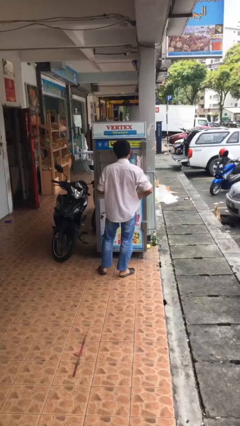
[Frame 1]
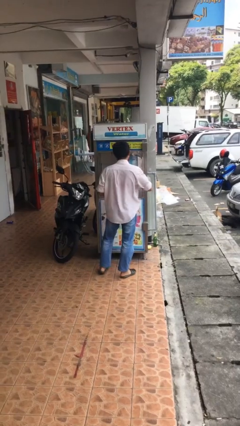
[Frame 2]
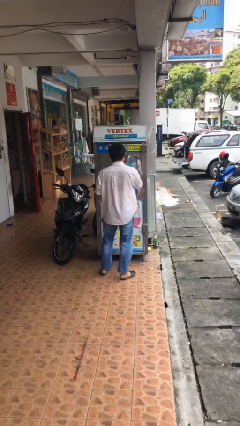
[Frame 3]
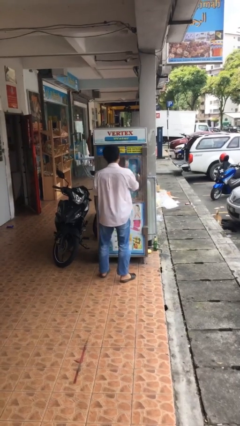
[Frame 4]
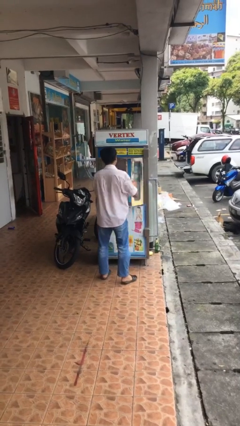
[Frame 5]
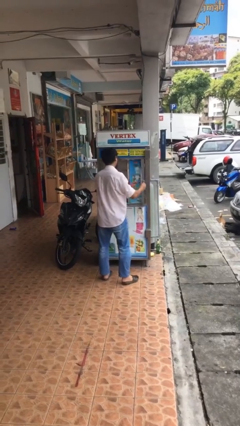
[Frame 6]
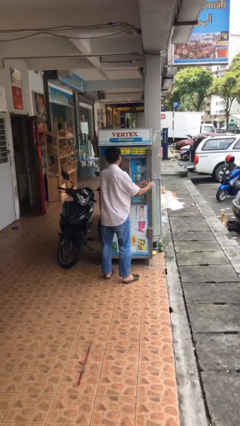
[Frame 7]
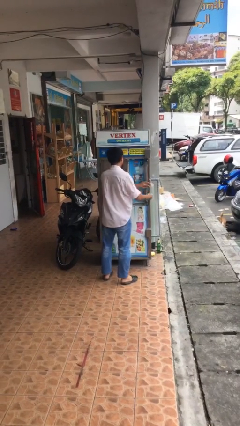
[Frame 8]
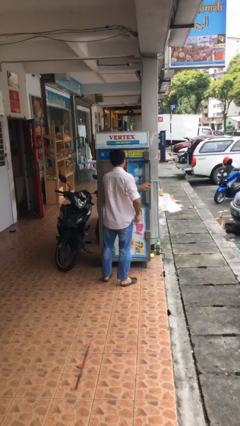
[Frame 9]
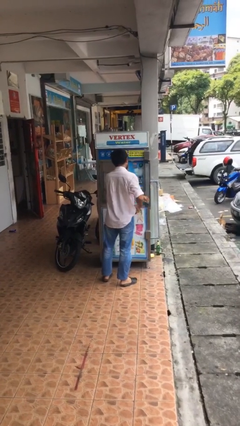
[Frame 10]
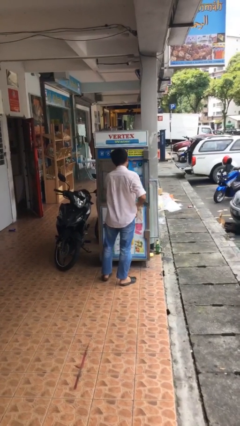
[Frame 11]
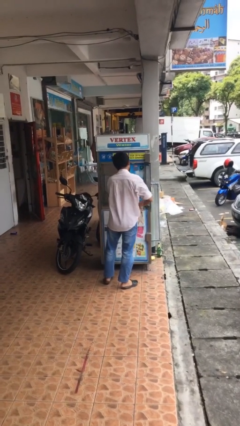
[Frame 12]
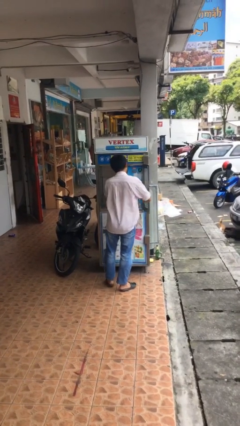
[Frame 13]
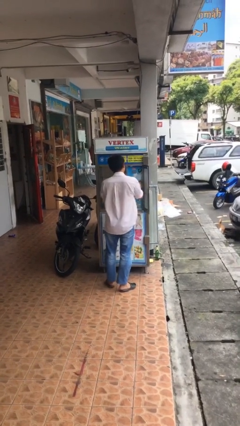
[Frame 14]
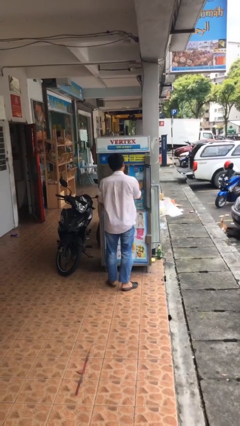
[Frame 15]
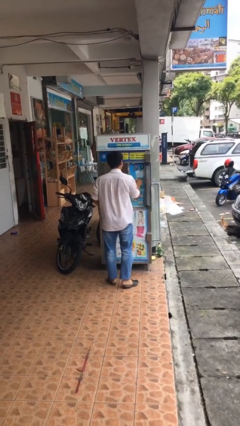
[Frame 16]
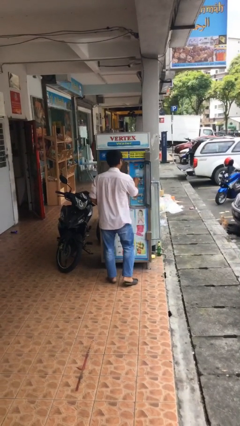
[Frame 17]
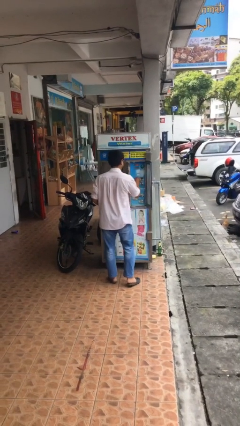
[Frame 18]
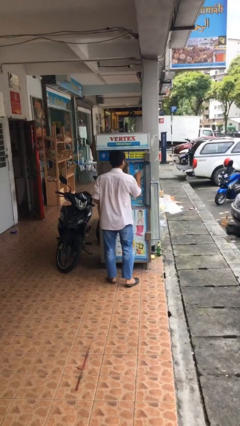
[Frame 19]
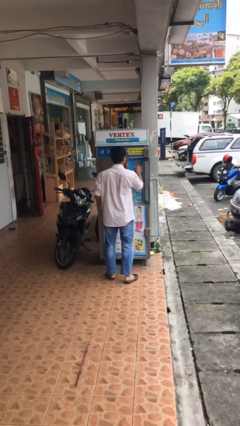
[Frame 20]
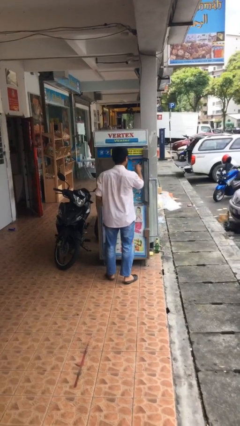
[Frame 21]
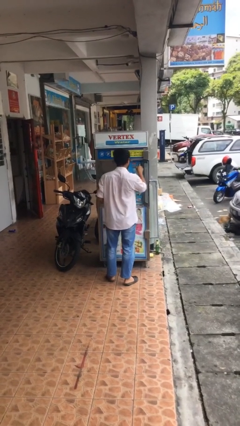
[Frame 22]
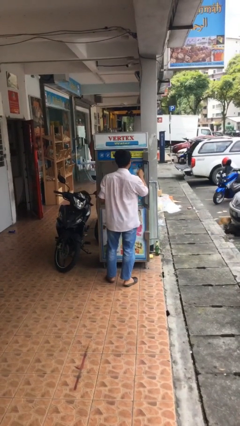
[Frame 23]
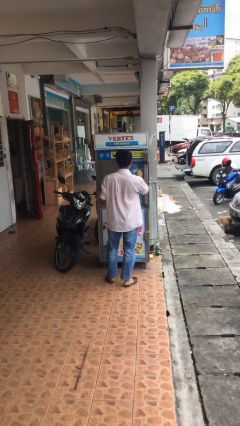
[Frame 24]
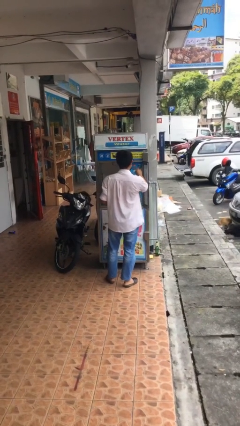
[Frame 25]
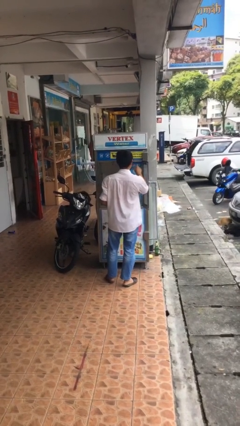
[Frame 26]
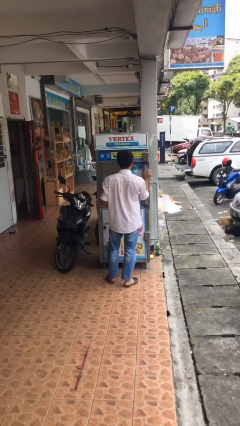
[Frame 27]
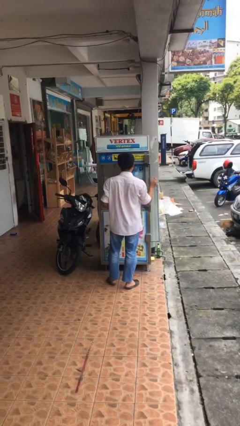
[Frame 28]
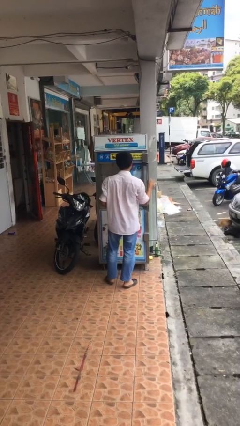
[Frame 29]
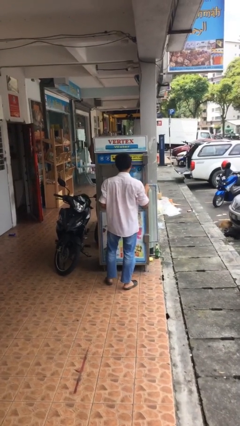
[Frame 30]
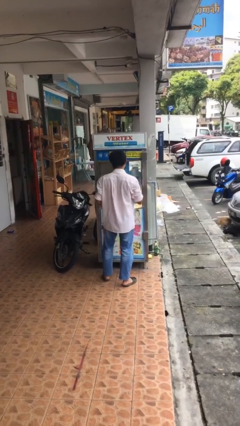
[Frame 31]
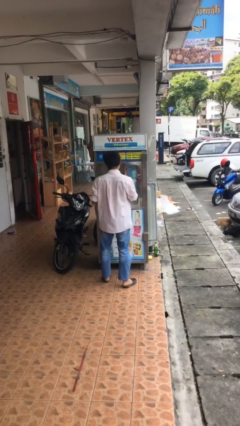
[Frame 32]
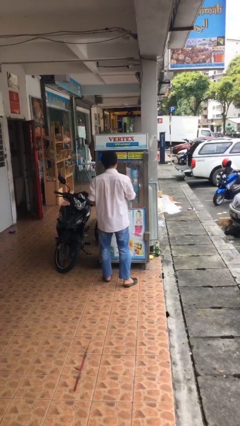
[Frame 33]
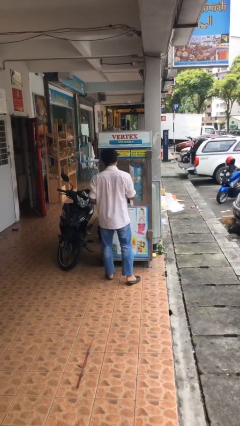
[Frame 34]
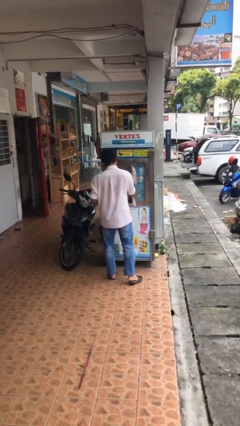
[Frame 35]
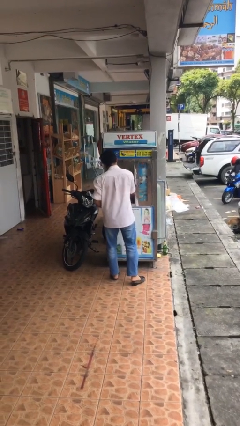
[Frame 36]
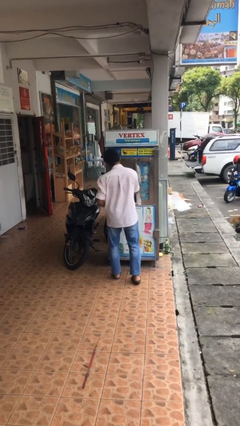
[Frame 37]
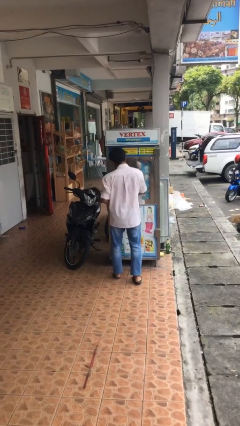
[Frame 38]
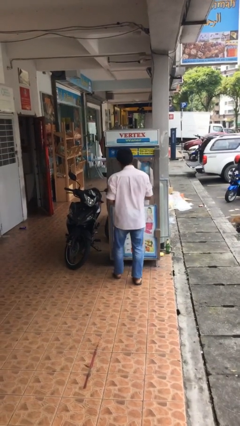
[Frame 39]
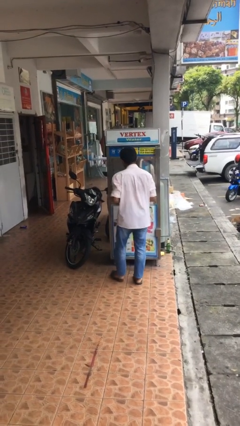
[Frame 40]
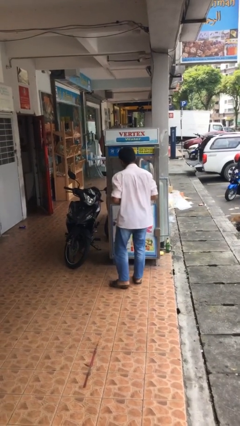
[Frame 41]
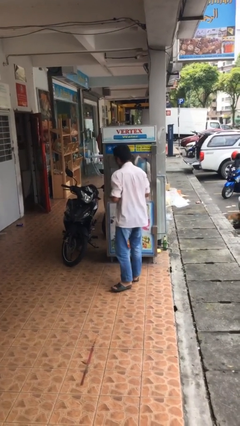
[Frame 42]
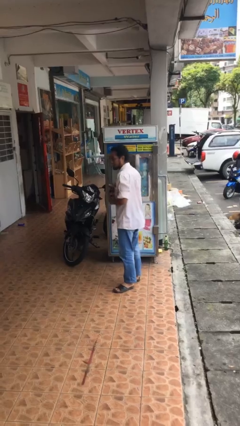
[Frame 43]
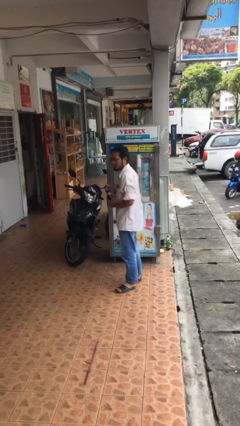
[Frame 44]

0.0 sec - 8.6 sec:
person purchases from machine

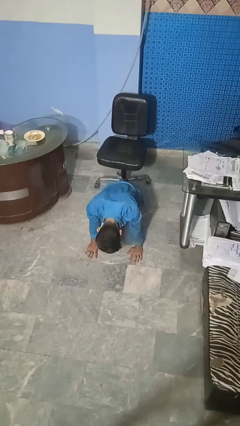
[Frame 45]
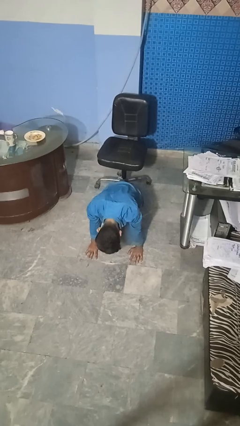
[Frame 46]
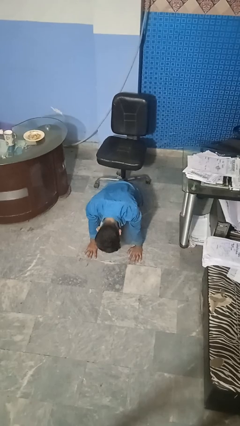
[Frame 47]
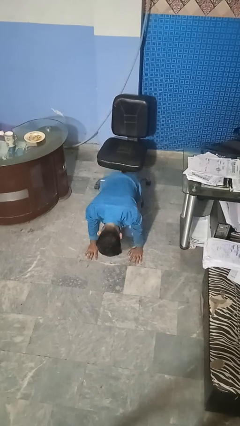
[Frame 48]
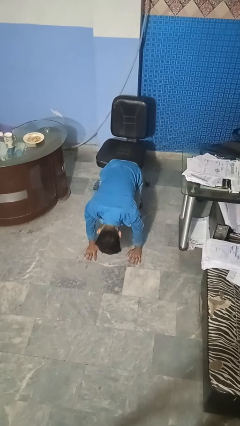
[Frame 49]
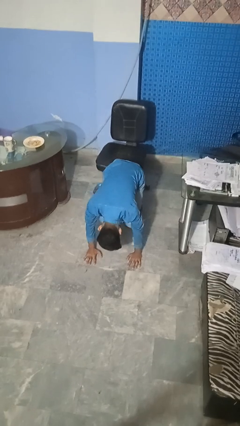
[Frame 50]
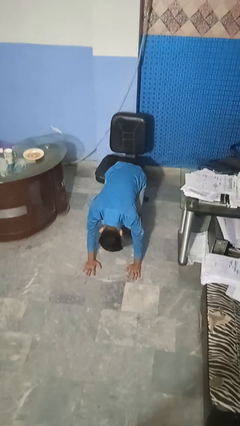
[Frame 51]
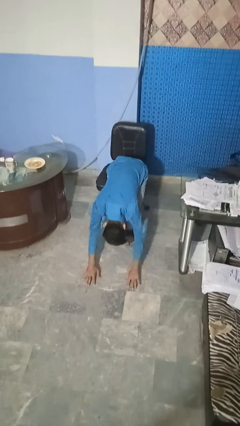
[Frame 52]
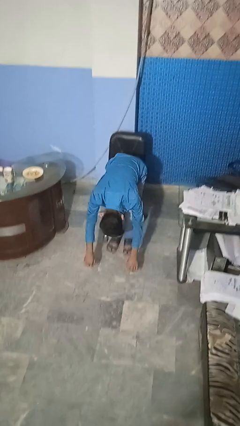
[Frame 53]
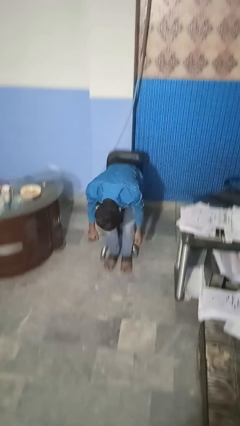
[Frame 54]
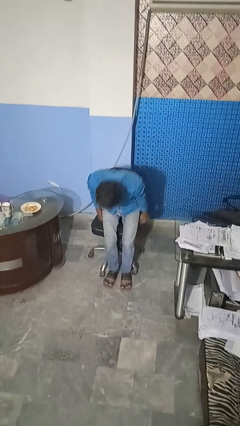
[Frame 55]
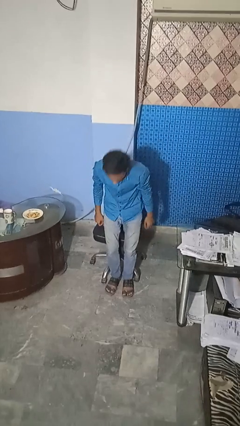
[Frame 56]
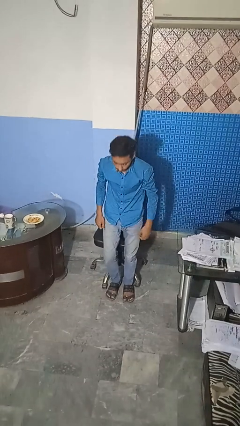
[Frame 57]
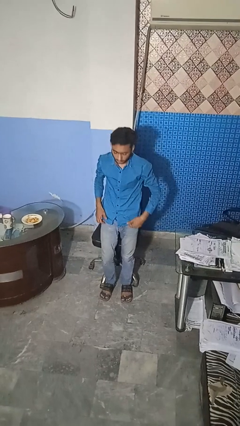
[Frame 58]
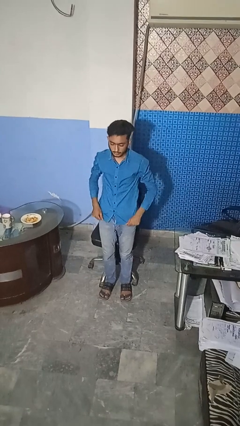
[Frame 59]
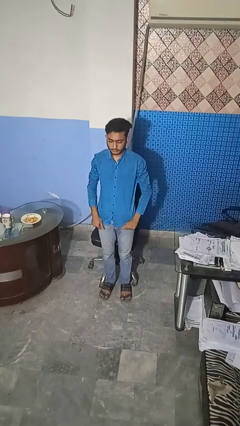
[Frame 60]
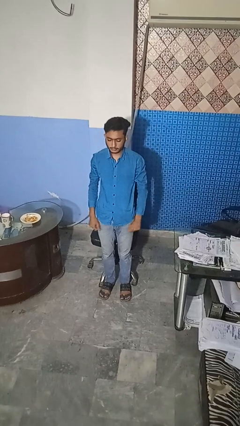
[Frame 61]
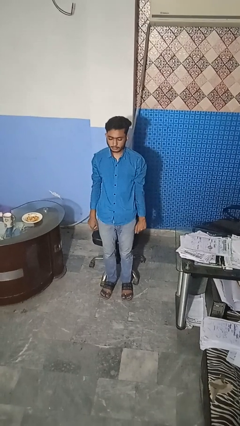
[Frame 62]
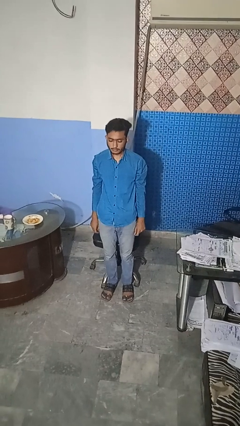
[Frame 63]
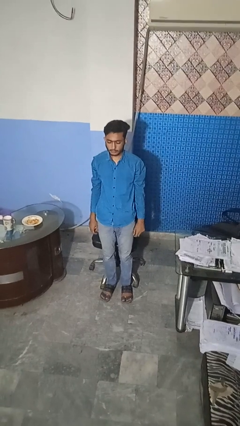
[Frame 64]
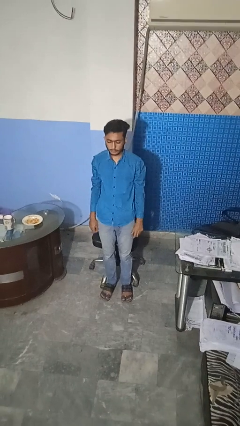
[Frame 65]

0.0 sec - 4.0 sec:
person stands up from floor

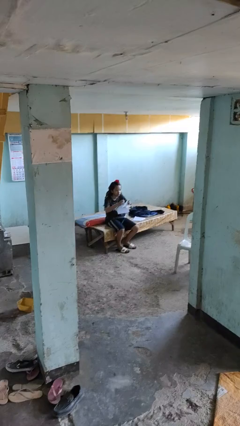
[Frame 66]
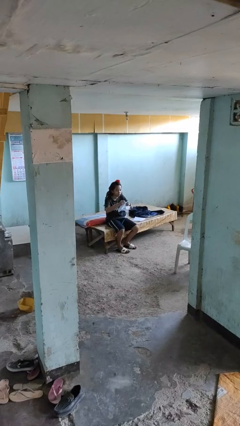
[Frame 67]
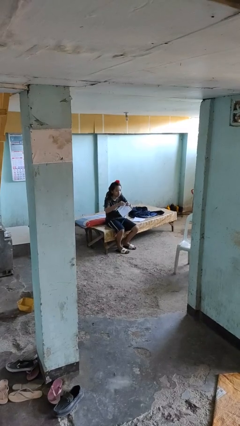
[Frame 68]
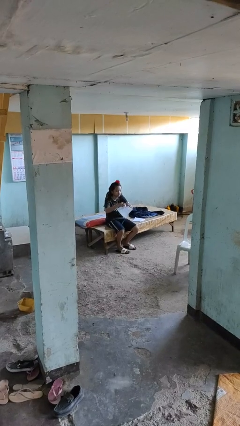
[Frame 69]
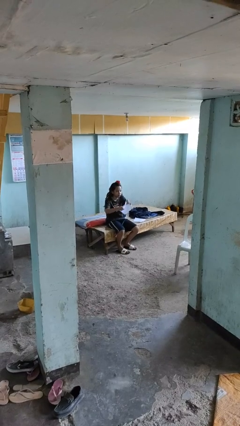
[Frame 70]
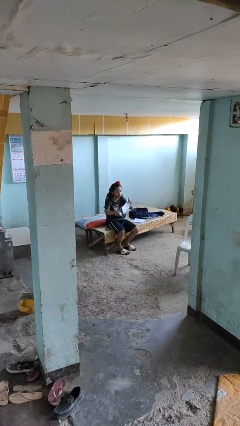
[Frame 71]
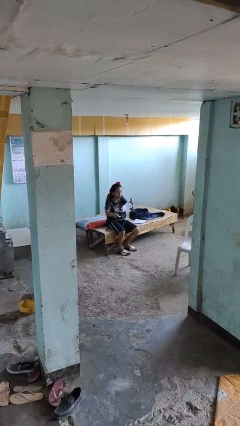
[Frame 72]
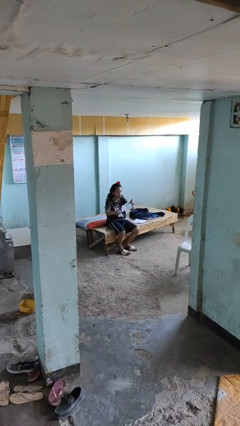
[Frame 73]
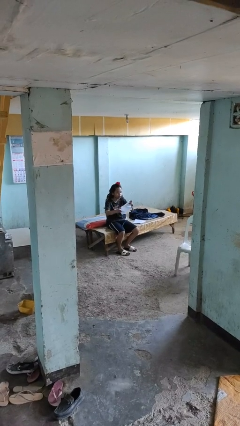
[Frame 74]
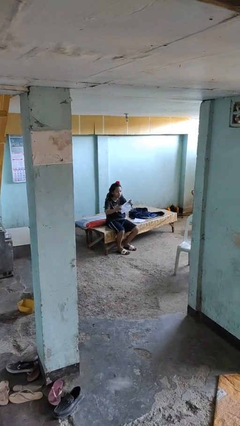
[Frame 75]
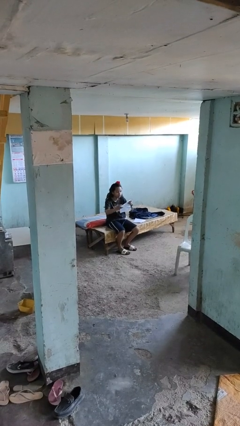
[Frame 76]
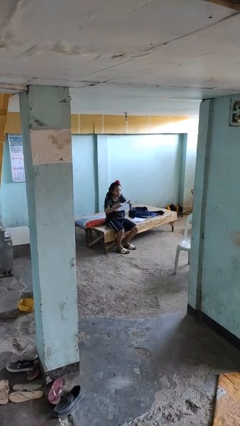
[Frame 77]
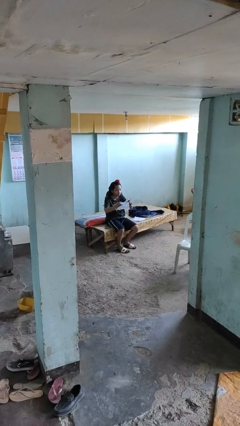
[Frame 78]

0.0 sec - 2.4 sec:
person tears paper

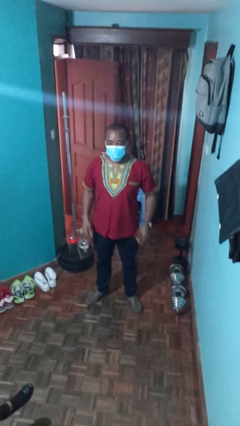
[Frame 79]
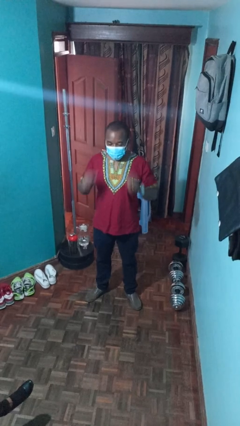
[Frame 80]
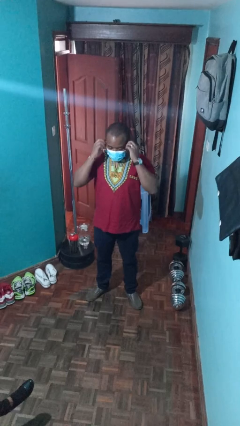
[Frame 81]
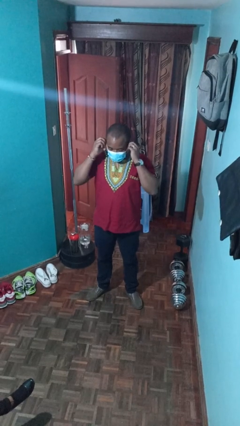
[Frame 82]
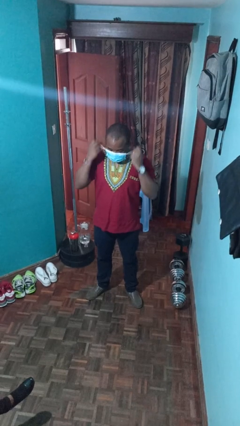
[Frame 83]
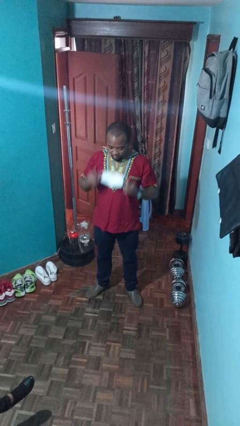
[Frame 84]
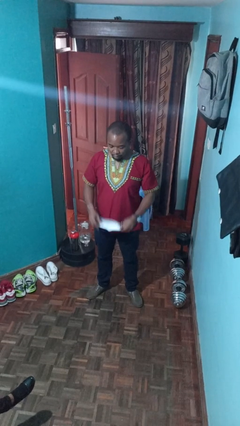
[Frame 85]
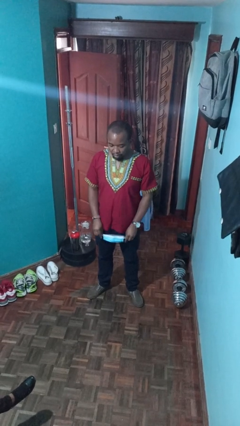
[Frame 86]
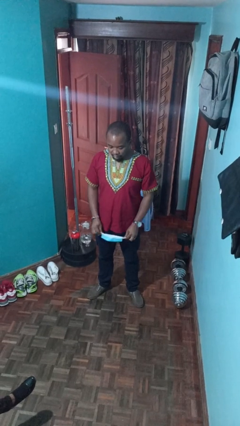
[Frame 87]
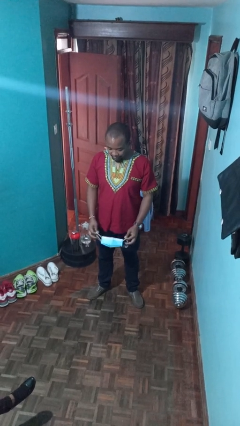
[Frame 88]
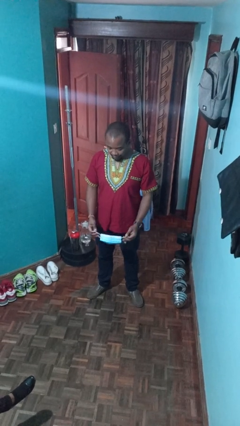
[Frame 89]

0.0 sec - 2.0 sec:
person takes off facemask

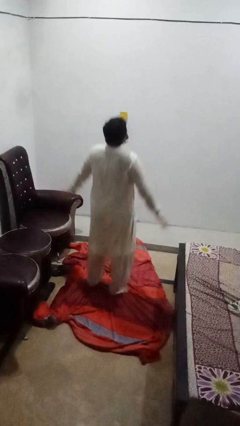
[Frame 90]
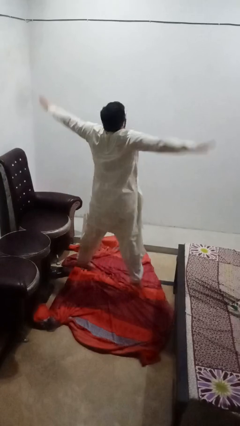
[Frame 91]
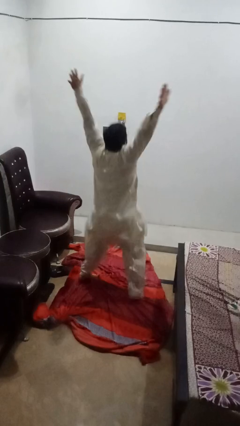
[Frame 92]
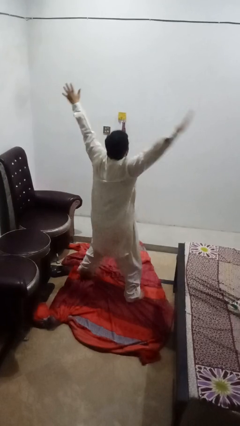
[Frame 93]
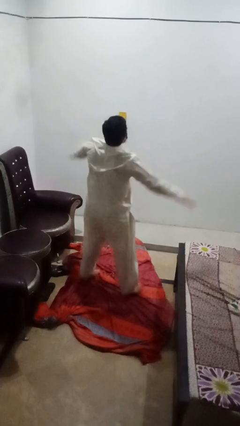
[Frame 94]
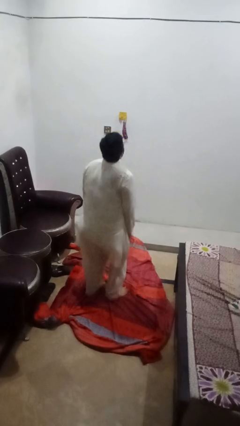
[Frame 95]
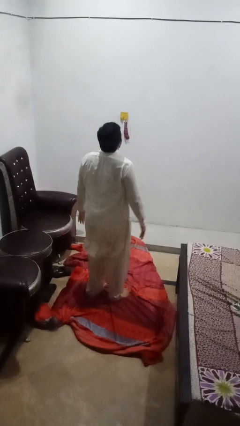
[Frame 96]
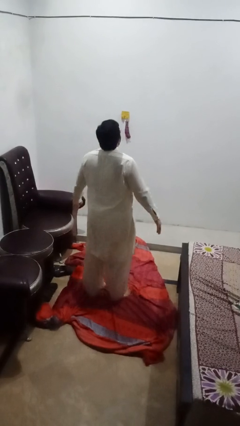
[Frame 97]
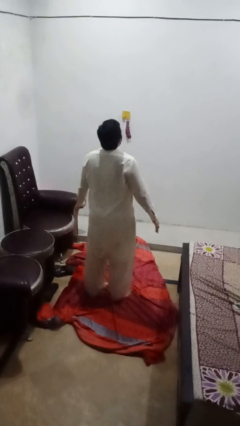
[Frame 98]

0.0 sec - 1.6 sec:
person exercises with jumping jacks
